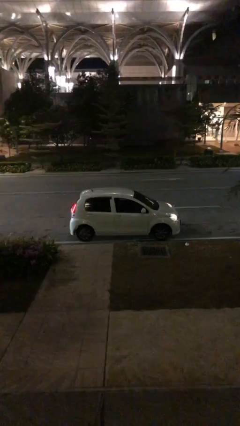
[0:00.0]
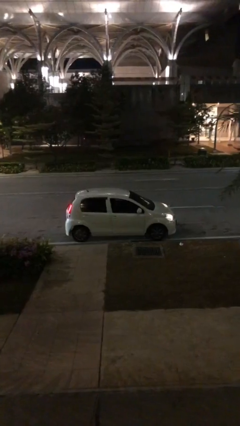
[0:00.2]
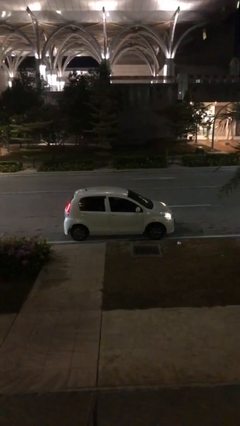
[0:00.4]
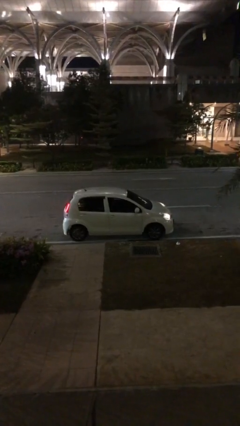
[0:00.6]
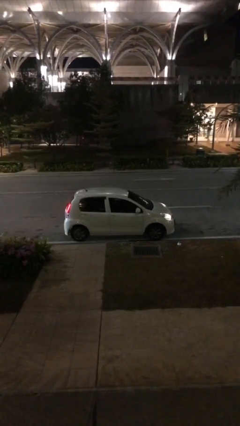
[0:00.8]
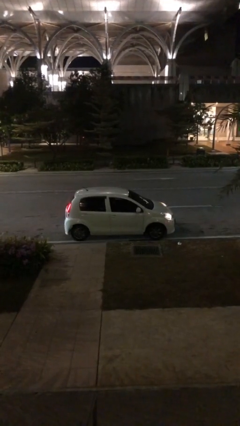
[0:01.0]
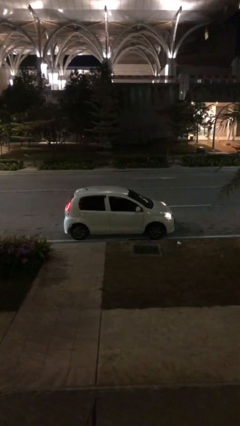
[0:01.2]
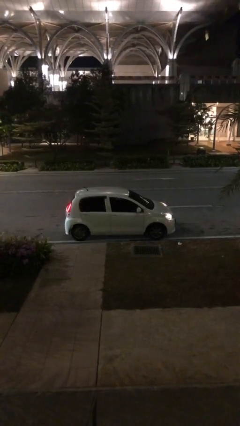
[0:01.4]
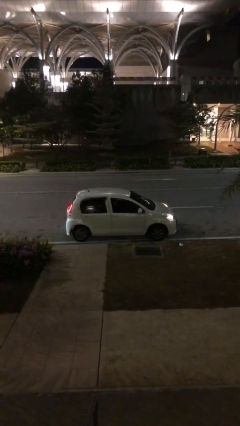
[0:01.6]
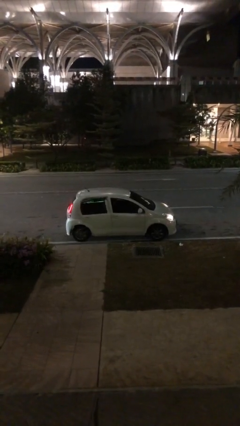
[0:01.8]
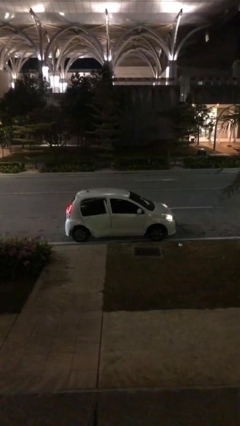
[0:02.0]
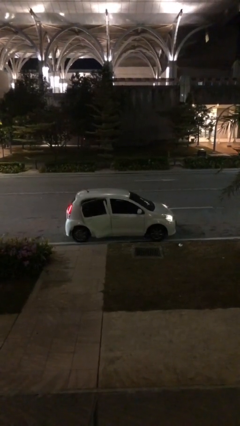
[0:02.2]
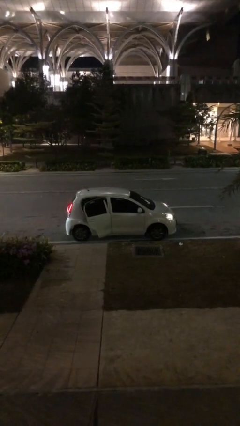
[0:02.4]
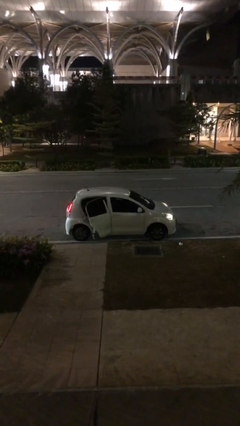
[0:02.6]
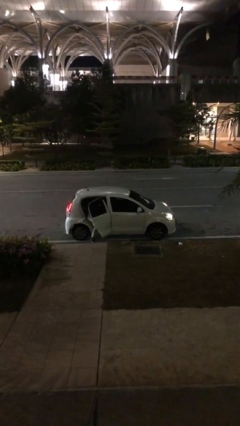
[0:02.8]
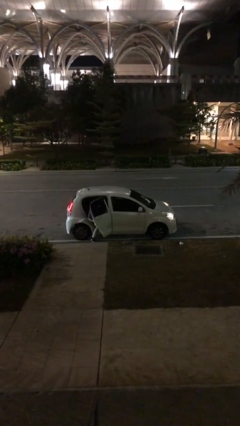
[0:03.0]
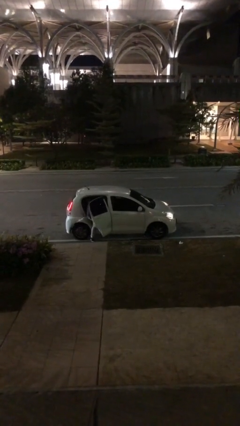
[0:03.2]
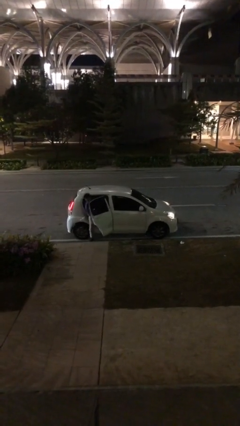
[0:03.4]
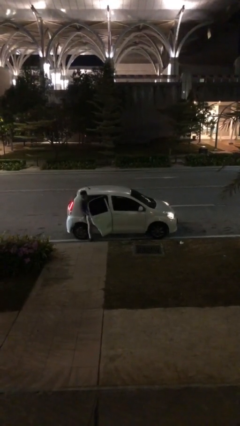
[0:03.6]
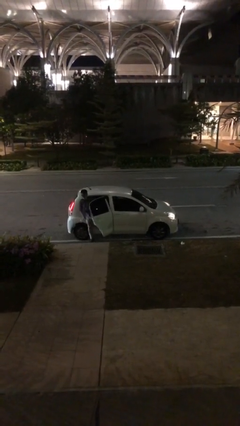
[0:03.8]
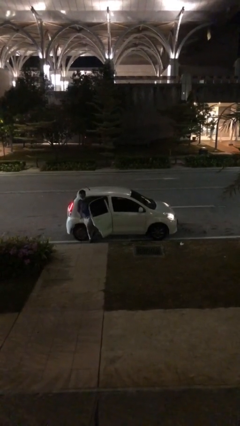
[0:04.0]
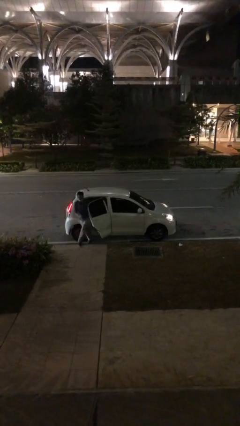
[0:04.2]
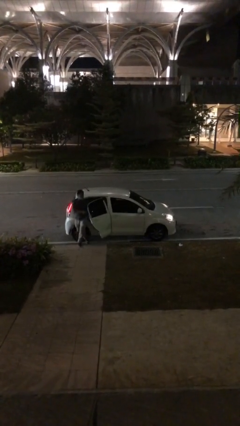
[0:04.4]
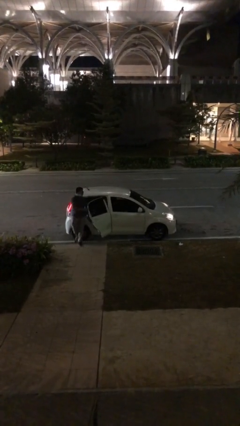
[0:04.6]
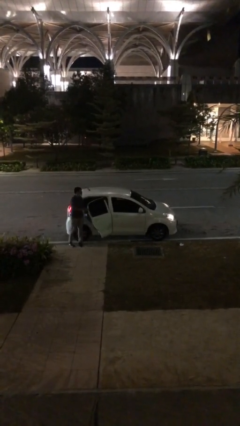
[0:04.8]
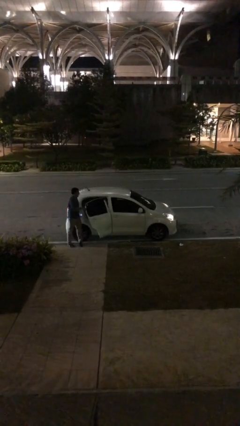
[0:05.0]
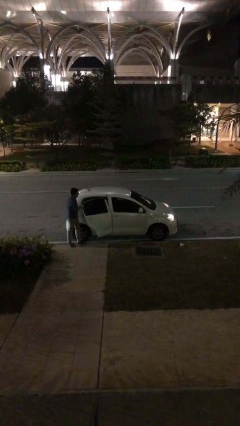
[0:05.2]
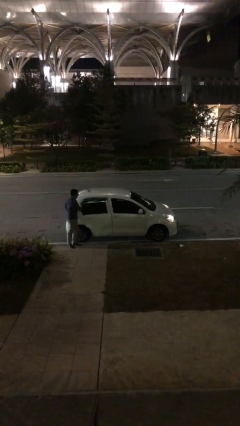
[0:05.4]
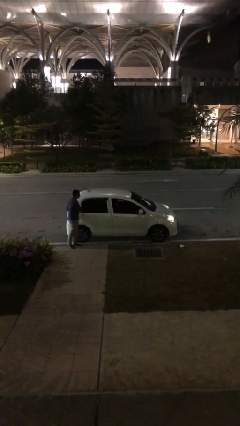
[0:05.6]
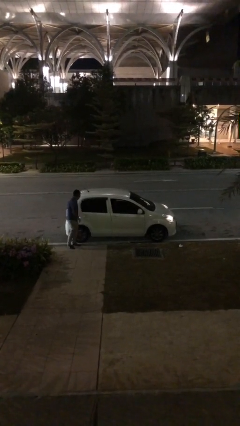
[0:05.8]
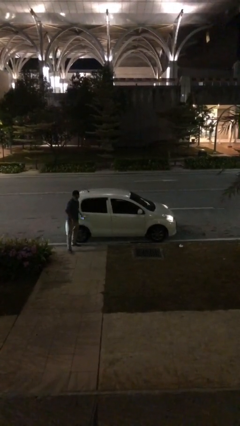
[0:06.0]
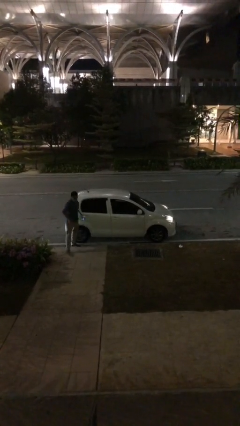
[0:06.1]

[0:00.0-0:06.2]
car drops off person

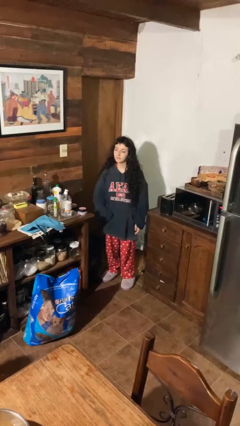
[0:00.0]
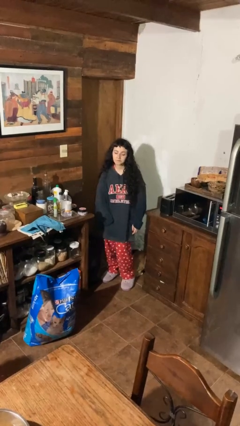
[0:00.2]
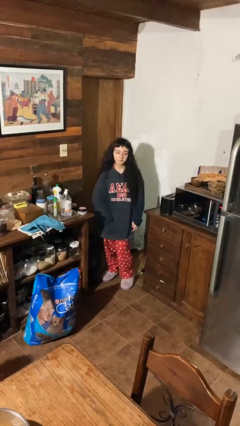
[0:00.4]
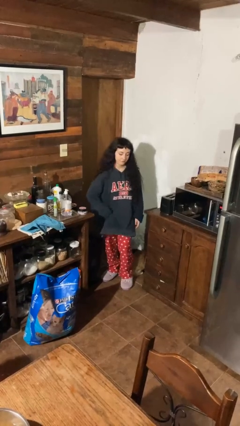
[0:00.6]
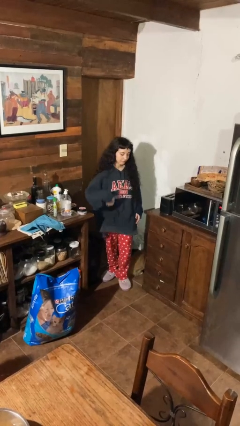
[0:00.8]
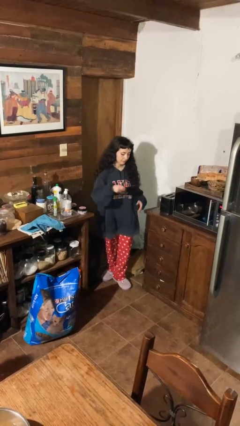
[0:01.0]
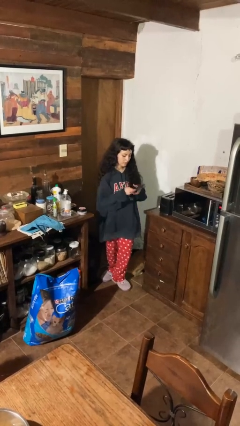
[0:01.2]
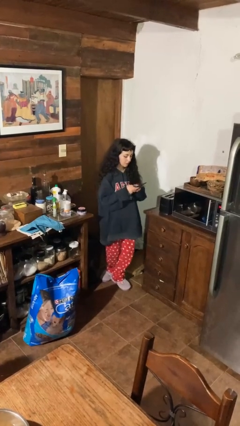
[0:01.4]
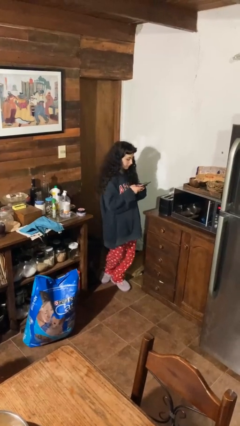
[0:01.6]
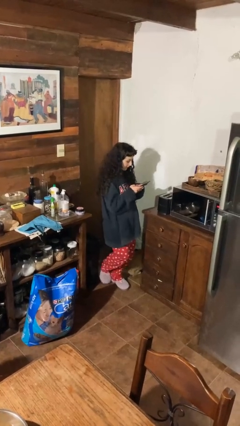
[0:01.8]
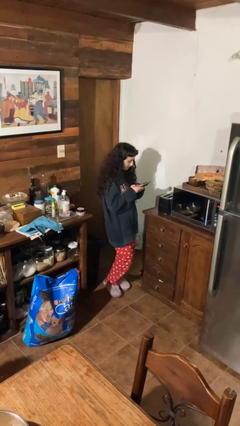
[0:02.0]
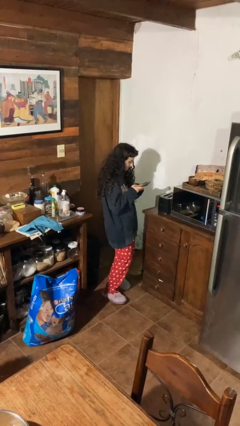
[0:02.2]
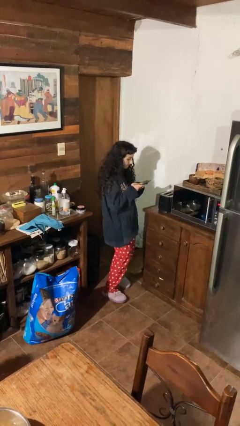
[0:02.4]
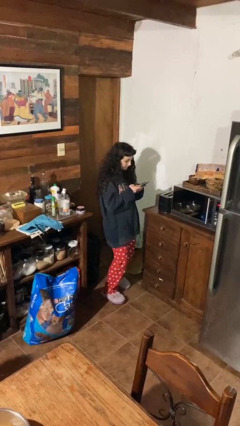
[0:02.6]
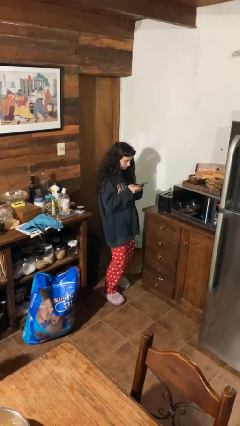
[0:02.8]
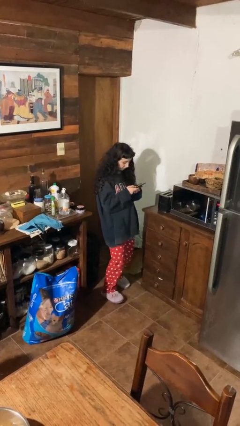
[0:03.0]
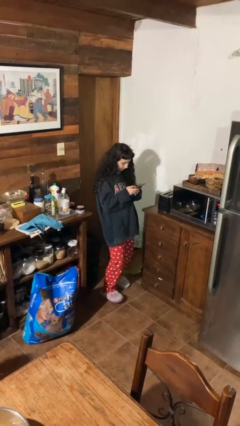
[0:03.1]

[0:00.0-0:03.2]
person takes phone from pocket

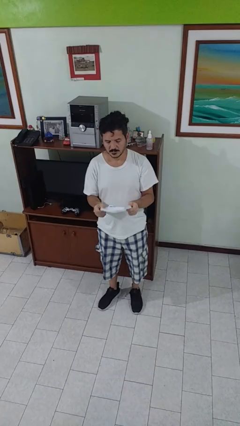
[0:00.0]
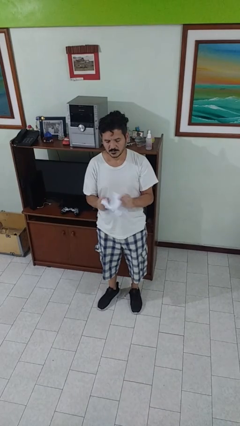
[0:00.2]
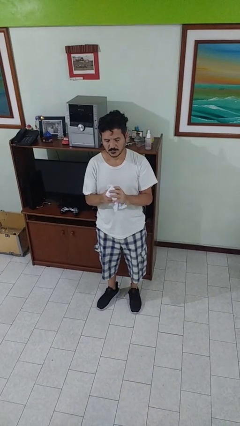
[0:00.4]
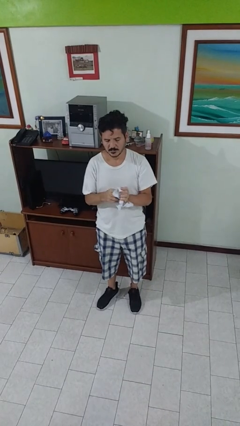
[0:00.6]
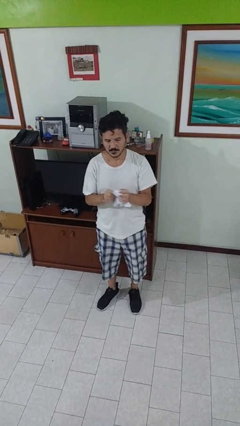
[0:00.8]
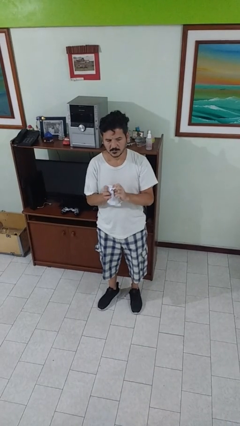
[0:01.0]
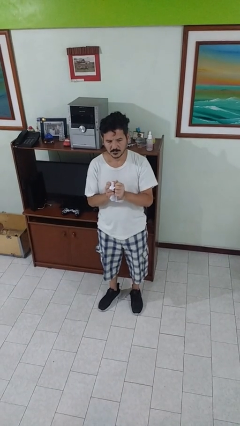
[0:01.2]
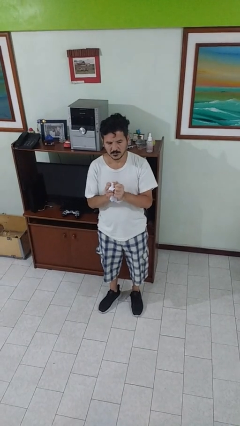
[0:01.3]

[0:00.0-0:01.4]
person crumples paper

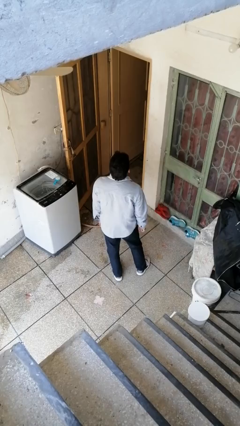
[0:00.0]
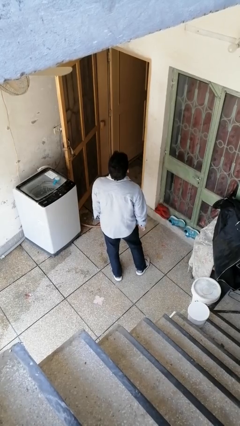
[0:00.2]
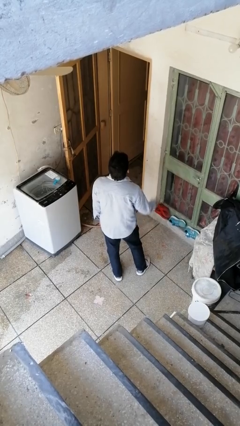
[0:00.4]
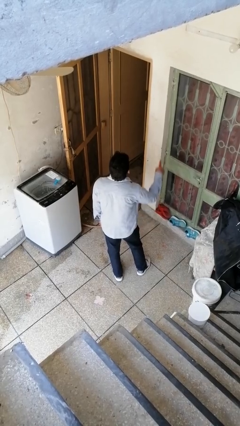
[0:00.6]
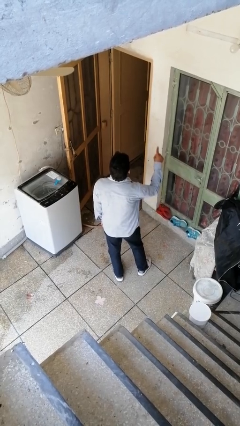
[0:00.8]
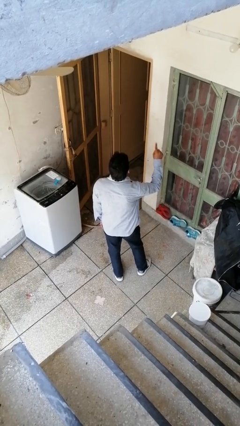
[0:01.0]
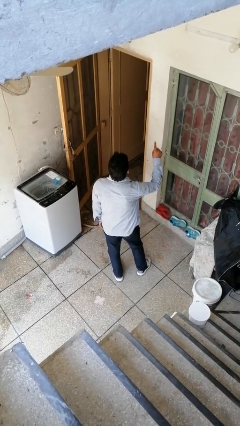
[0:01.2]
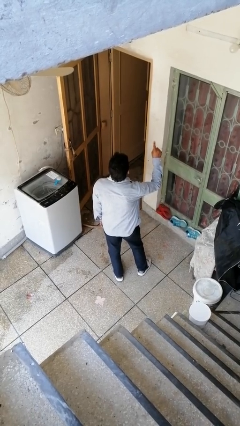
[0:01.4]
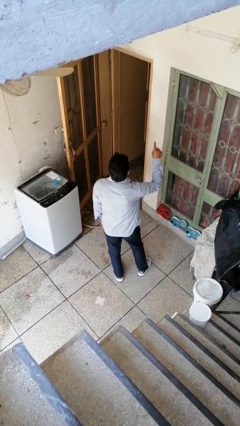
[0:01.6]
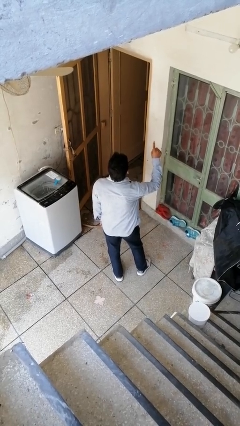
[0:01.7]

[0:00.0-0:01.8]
person gestures number one

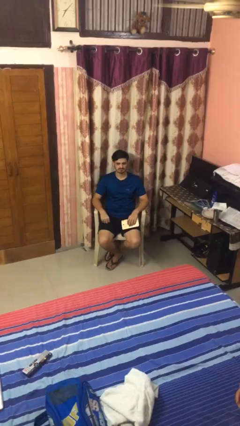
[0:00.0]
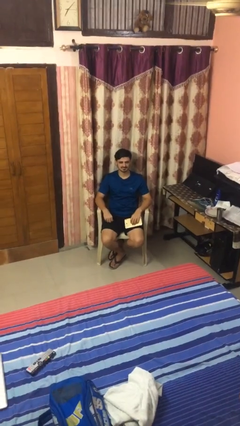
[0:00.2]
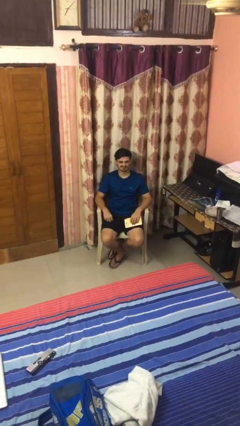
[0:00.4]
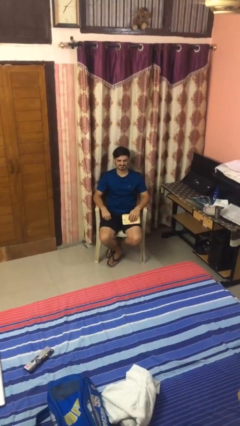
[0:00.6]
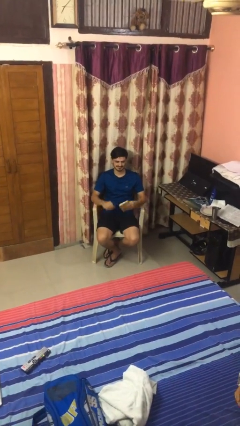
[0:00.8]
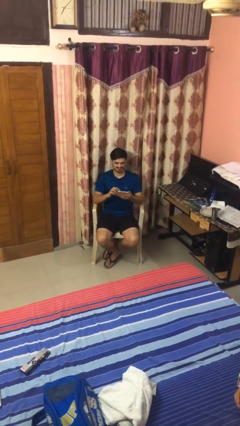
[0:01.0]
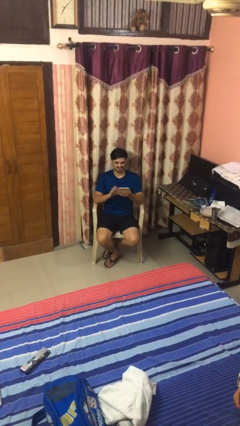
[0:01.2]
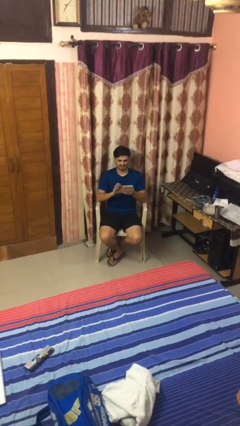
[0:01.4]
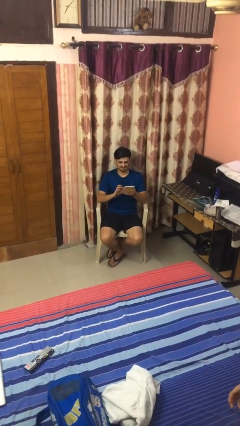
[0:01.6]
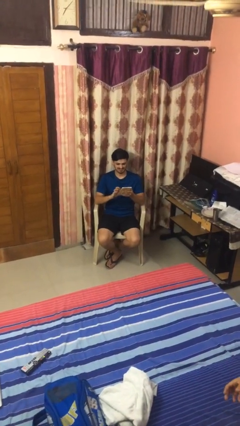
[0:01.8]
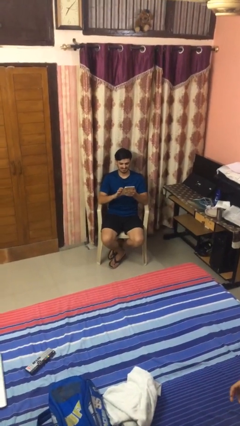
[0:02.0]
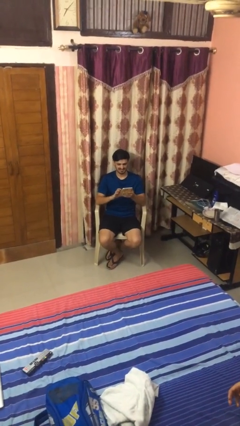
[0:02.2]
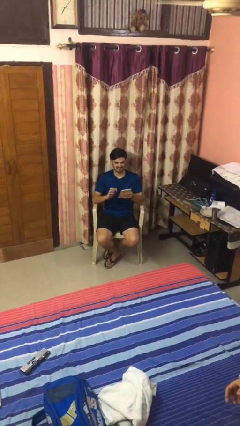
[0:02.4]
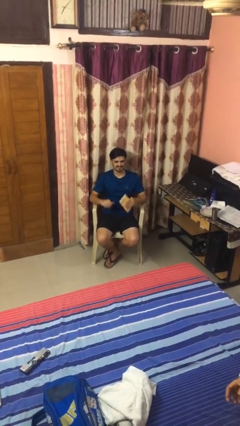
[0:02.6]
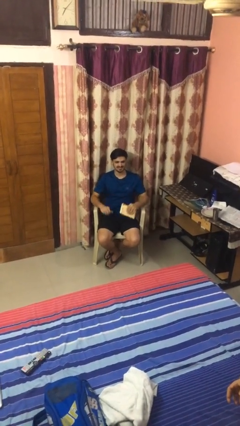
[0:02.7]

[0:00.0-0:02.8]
person interacts with tablet

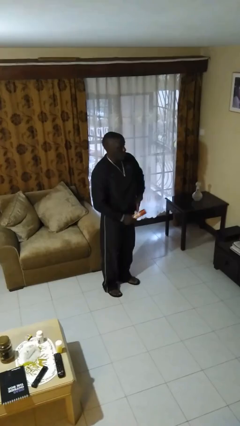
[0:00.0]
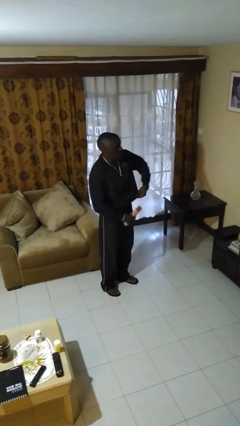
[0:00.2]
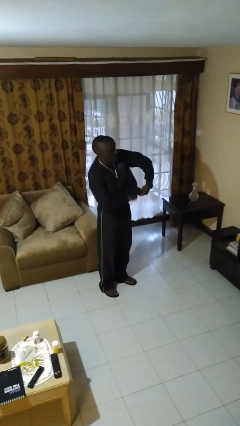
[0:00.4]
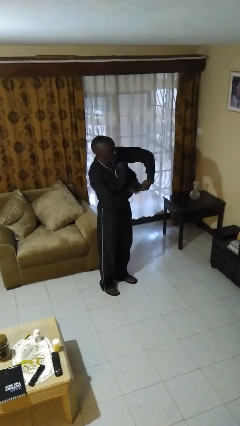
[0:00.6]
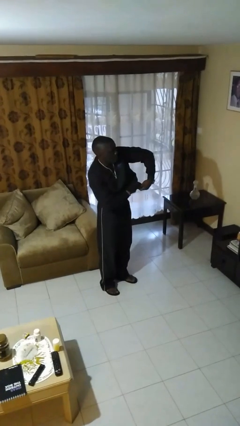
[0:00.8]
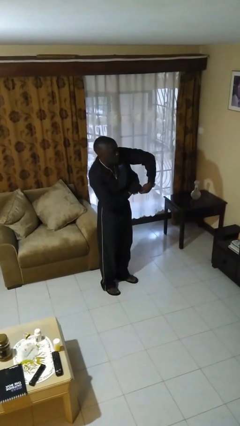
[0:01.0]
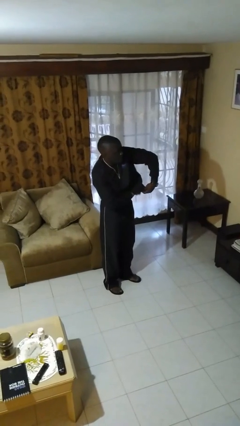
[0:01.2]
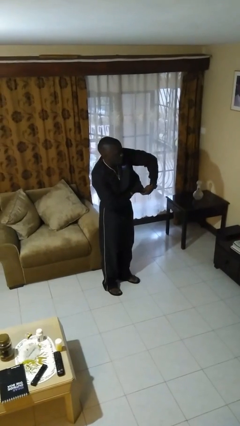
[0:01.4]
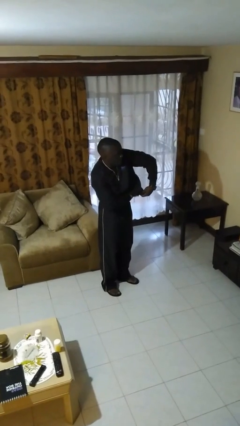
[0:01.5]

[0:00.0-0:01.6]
person applies deodorant
